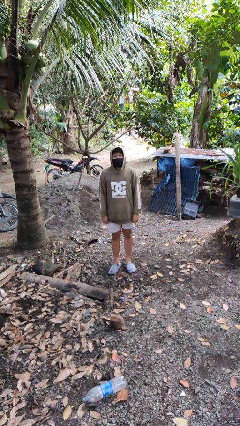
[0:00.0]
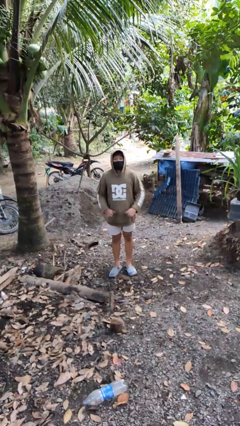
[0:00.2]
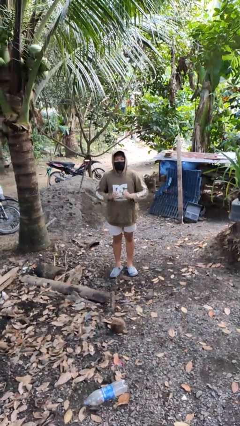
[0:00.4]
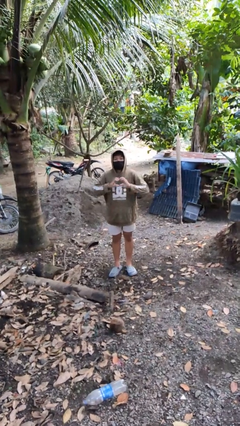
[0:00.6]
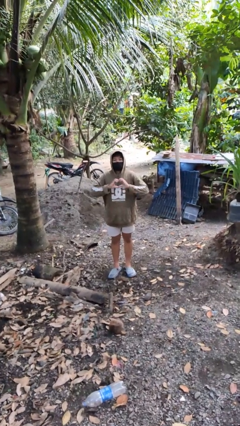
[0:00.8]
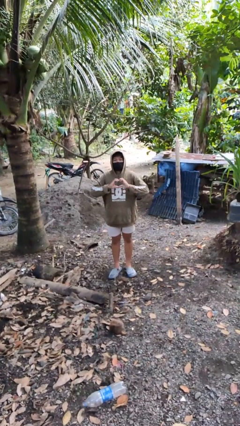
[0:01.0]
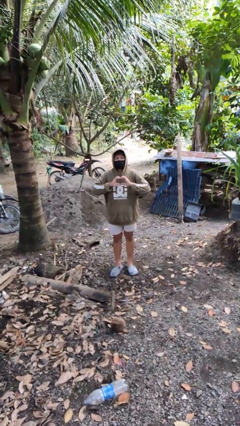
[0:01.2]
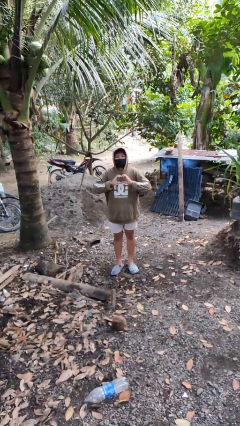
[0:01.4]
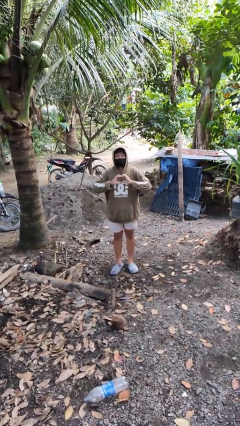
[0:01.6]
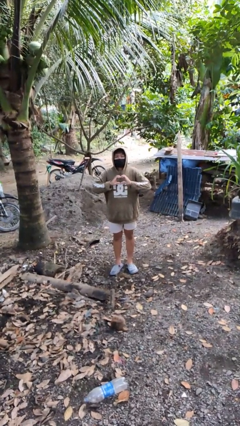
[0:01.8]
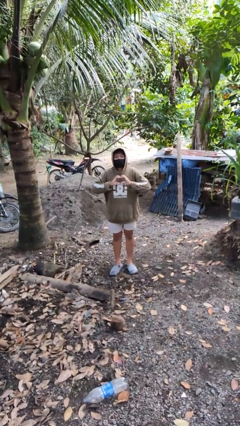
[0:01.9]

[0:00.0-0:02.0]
person gestures heart

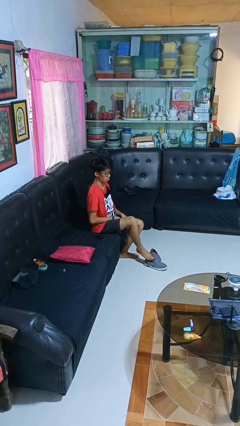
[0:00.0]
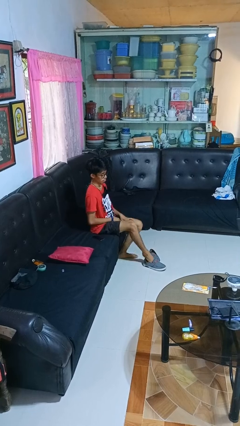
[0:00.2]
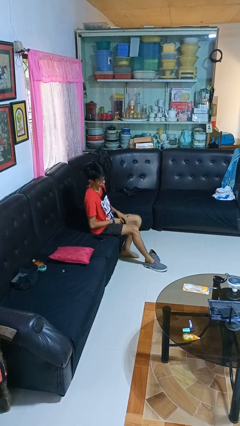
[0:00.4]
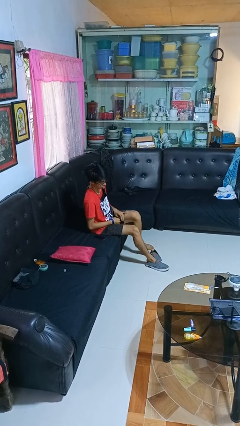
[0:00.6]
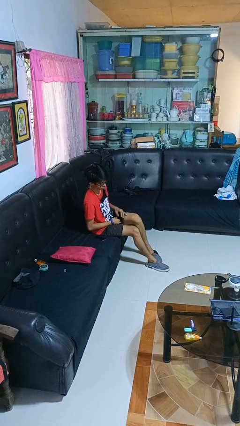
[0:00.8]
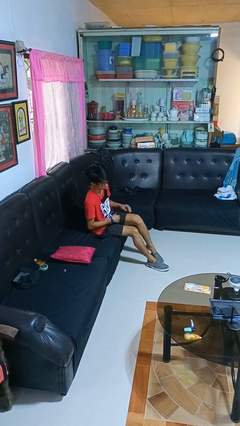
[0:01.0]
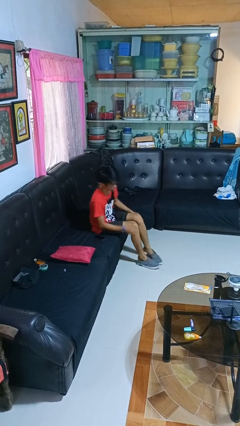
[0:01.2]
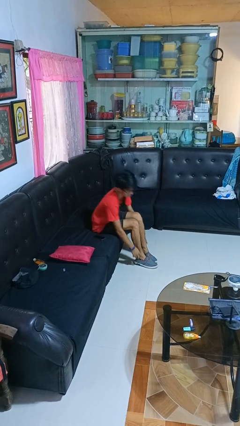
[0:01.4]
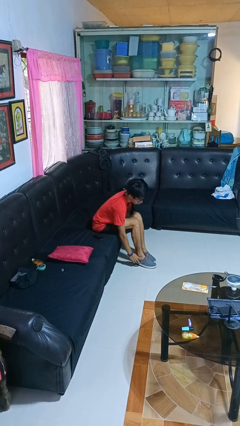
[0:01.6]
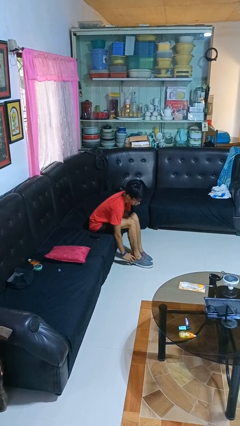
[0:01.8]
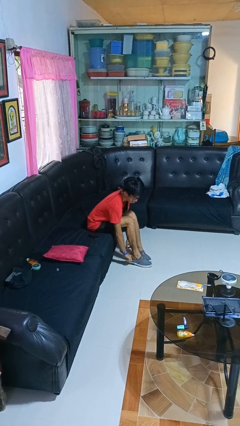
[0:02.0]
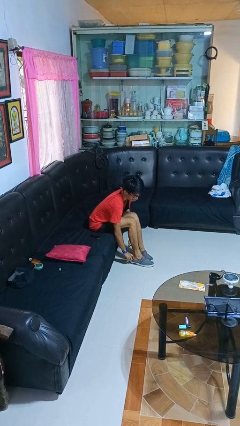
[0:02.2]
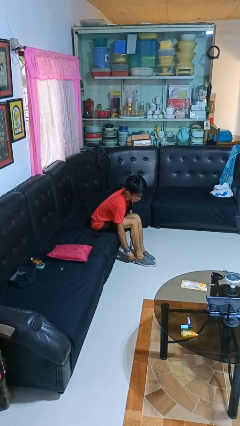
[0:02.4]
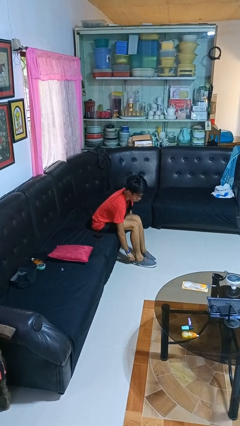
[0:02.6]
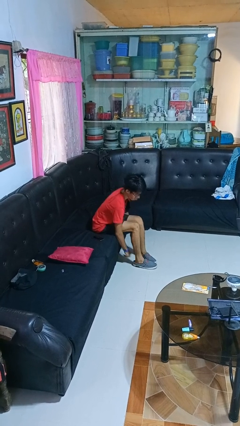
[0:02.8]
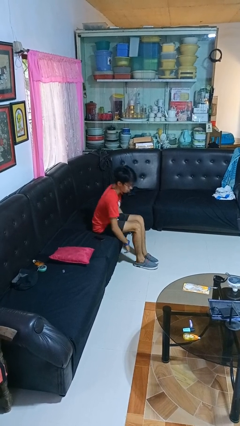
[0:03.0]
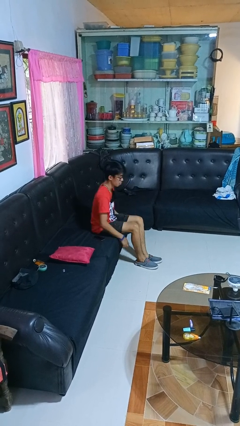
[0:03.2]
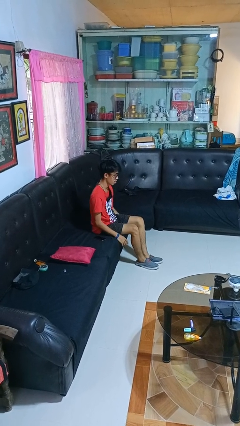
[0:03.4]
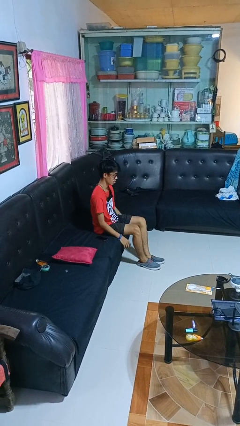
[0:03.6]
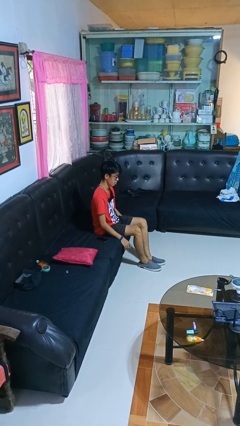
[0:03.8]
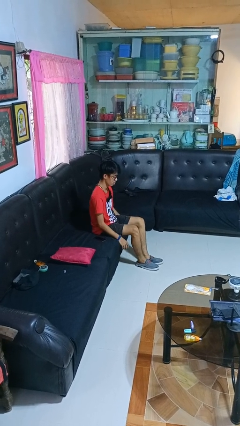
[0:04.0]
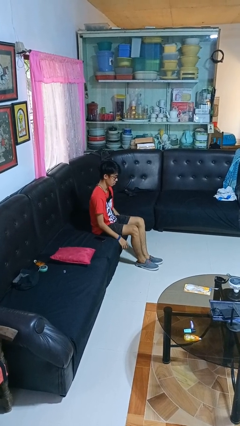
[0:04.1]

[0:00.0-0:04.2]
person puts on shoes

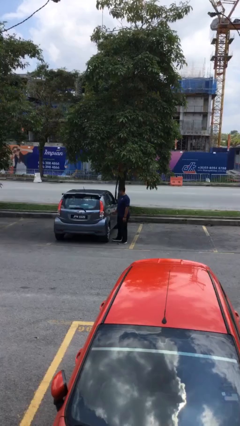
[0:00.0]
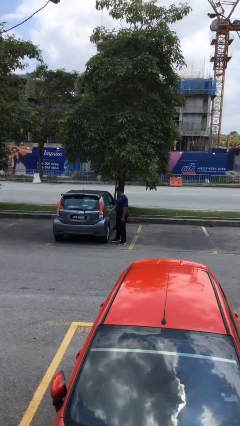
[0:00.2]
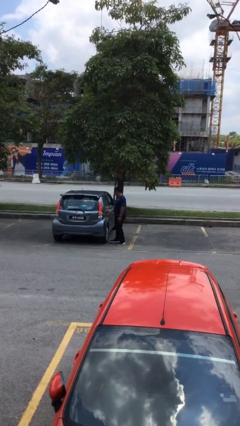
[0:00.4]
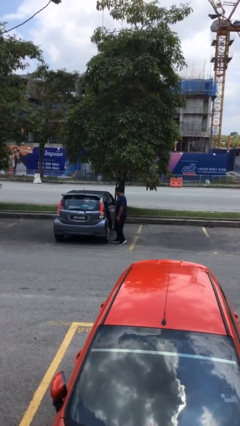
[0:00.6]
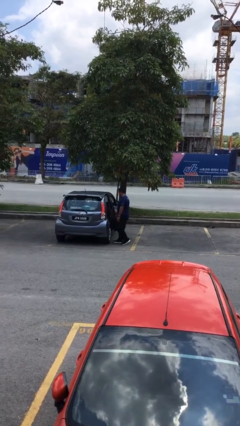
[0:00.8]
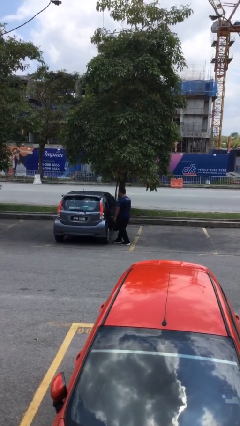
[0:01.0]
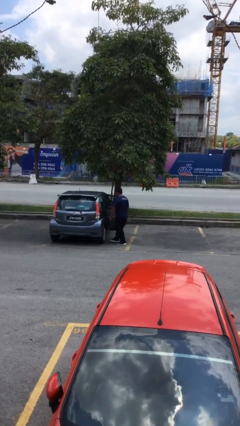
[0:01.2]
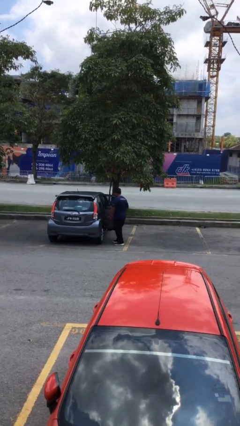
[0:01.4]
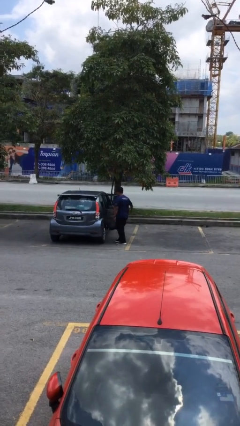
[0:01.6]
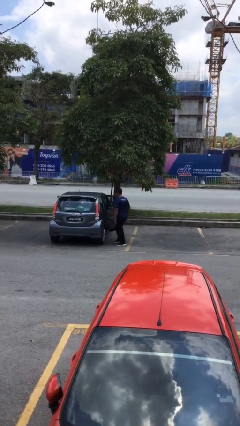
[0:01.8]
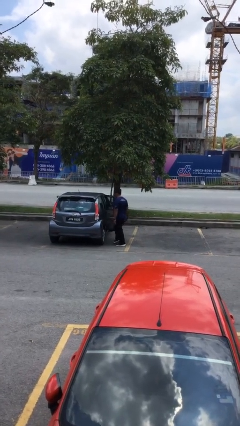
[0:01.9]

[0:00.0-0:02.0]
person opens car door

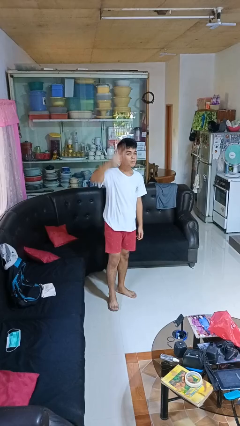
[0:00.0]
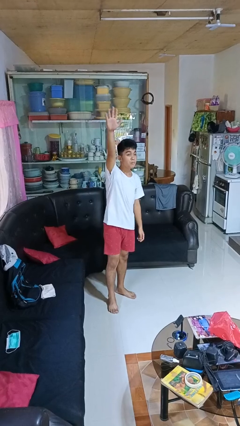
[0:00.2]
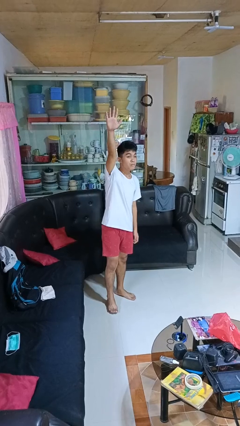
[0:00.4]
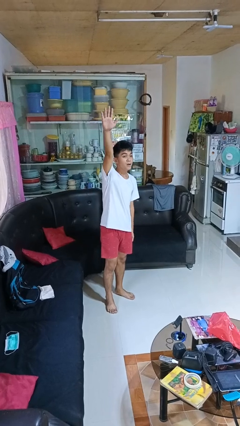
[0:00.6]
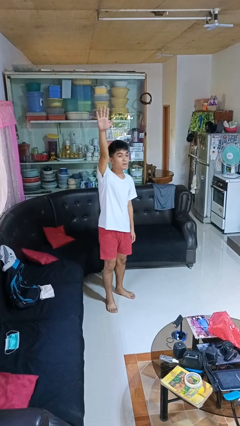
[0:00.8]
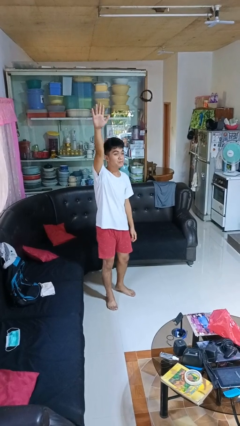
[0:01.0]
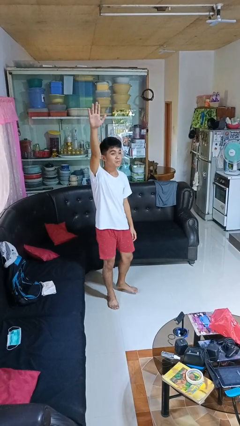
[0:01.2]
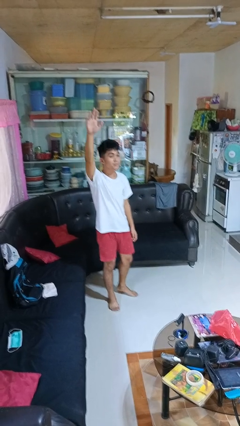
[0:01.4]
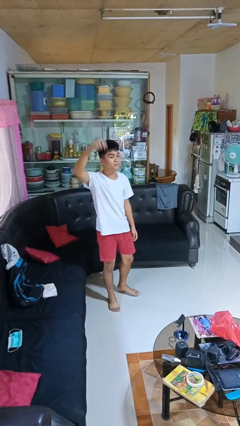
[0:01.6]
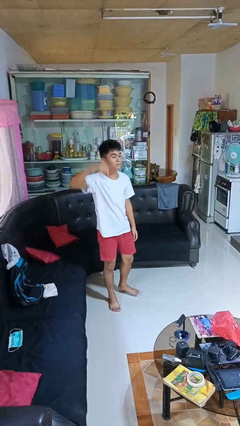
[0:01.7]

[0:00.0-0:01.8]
person gestures raise hand

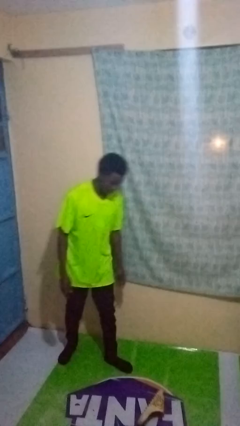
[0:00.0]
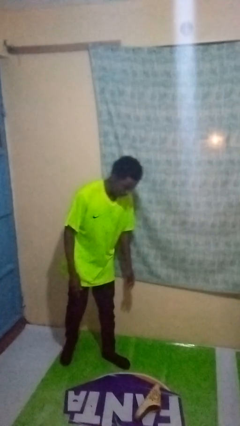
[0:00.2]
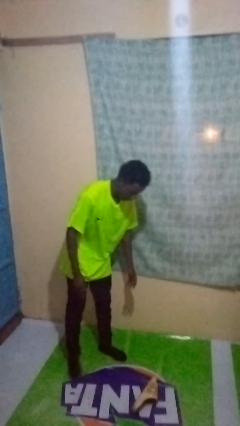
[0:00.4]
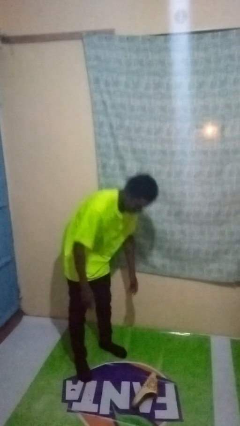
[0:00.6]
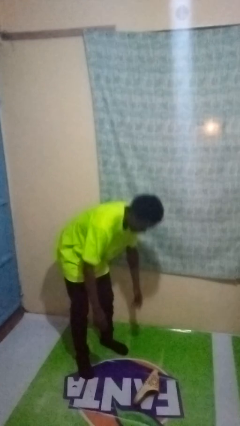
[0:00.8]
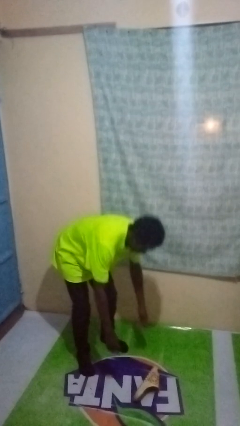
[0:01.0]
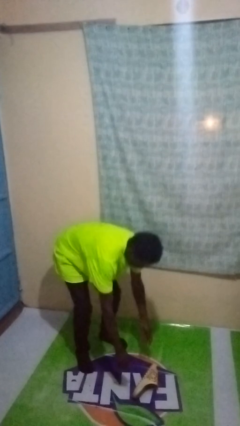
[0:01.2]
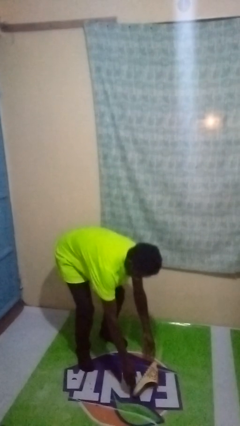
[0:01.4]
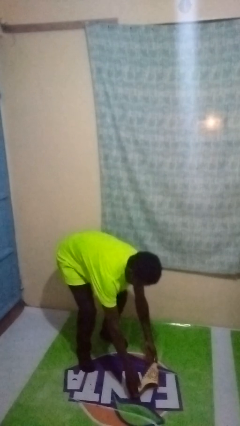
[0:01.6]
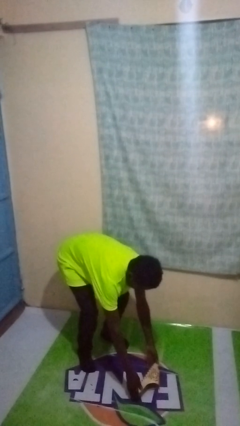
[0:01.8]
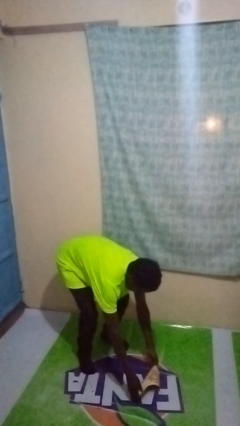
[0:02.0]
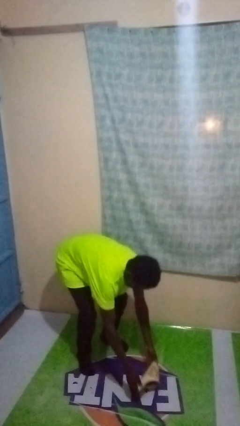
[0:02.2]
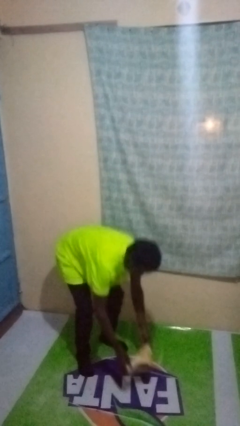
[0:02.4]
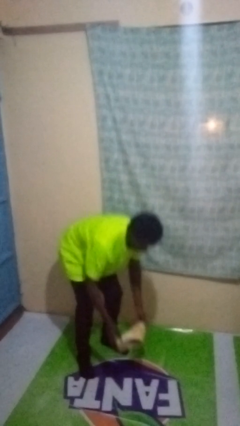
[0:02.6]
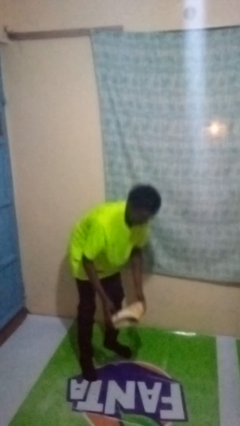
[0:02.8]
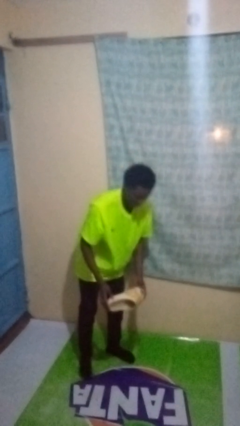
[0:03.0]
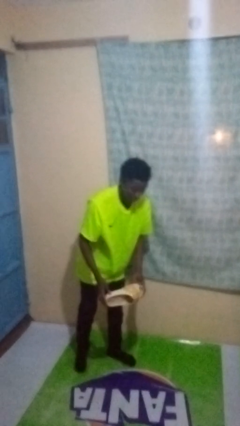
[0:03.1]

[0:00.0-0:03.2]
person picks up object from floor

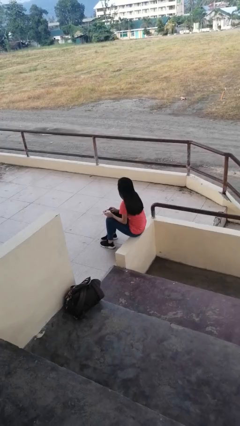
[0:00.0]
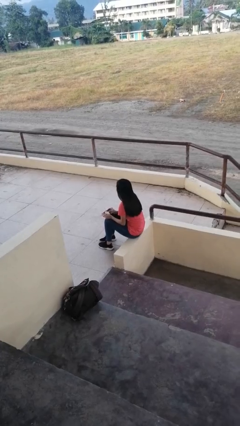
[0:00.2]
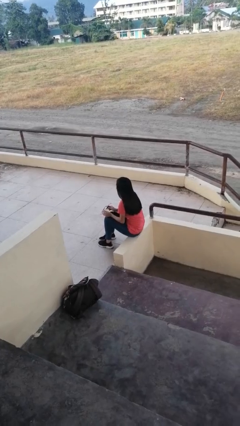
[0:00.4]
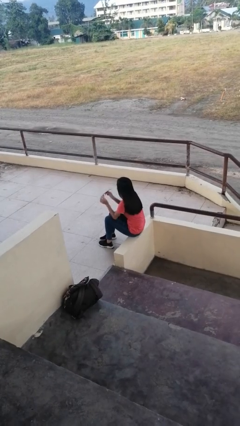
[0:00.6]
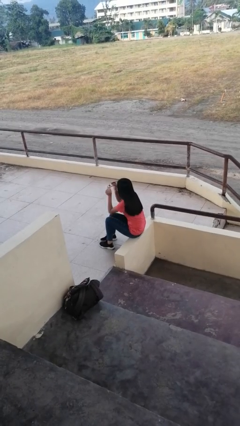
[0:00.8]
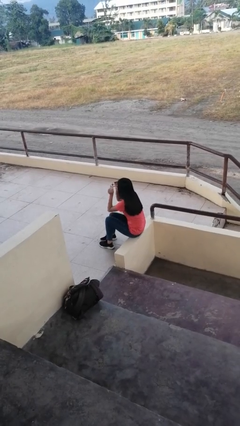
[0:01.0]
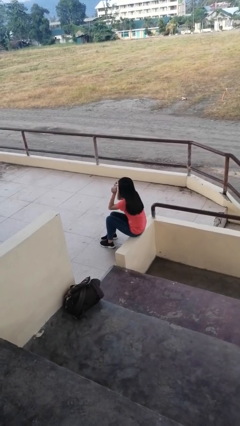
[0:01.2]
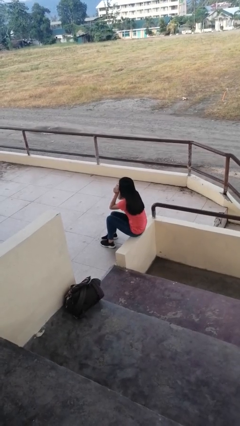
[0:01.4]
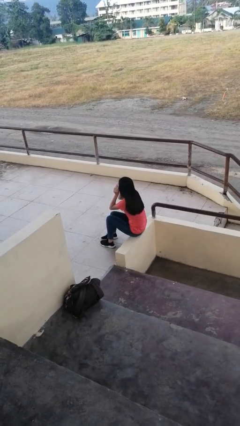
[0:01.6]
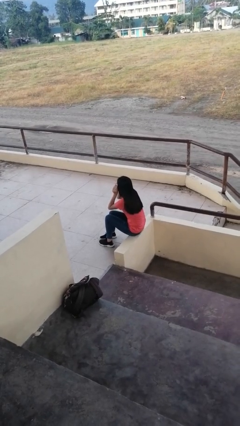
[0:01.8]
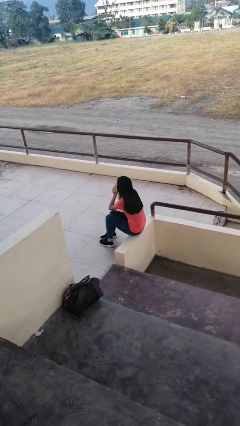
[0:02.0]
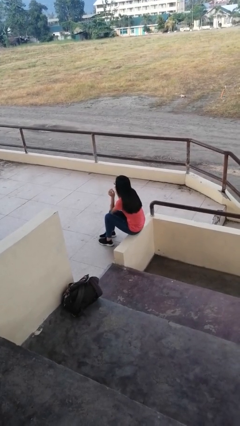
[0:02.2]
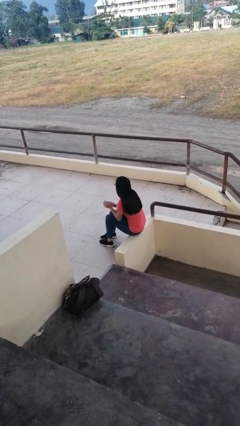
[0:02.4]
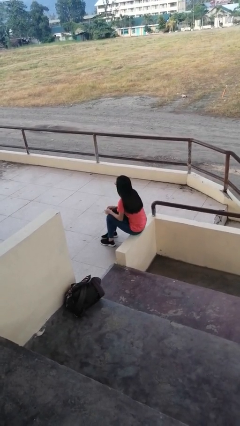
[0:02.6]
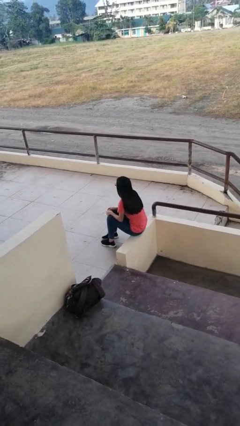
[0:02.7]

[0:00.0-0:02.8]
person puts on glasses

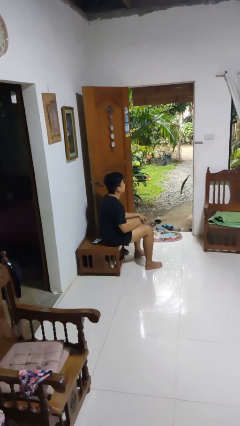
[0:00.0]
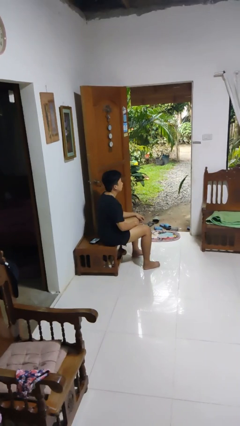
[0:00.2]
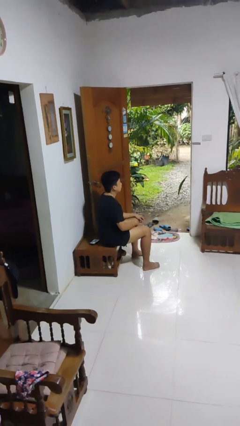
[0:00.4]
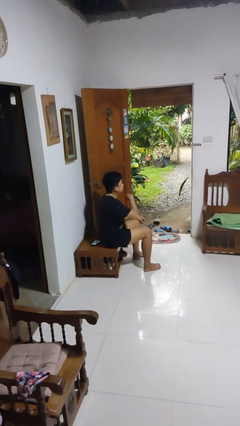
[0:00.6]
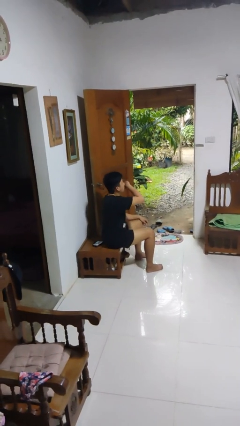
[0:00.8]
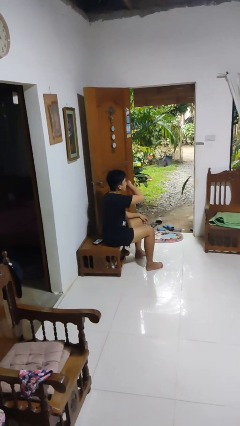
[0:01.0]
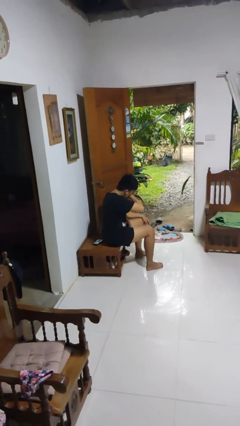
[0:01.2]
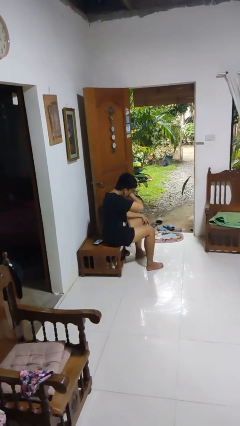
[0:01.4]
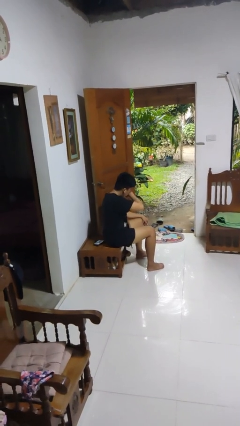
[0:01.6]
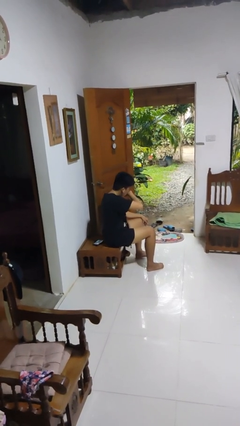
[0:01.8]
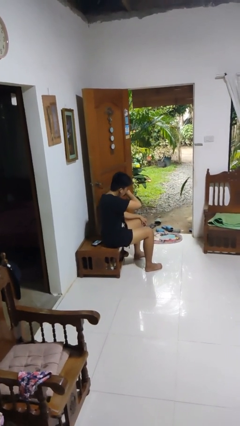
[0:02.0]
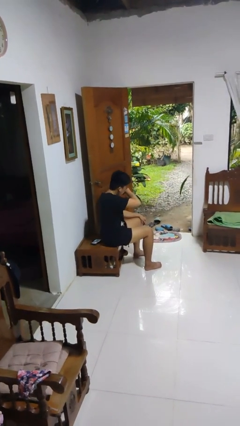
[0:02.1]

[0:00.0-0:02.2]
person sneezes into arm
